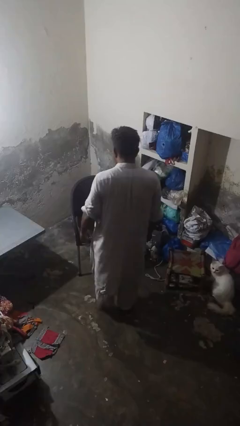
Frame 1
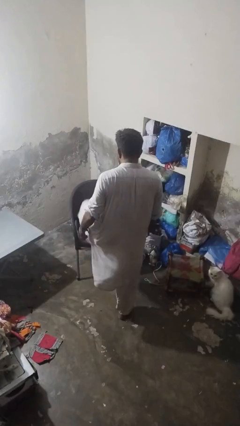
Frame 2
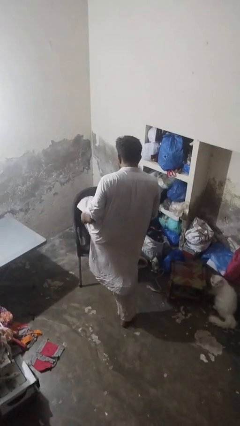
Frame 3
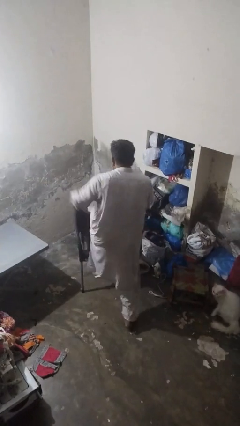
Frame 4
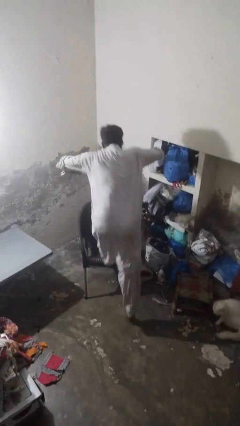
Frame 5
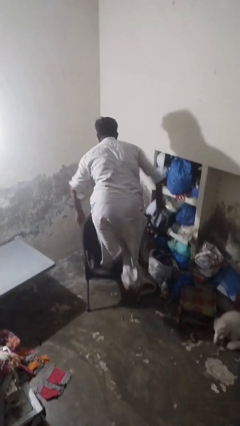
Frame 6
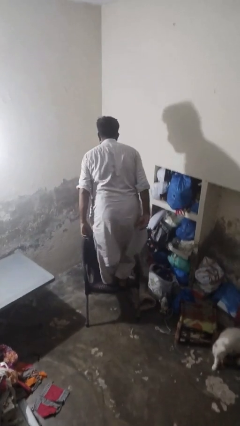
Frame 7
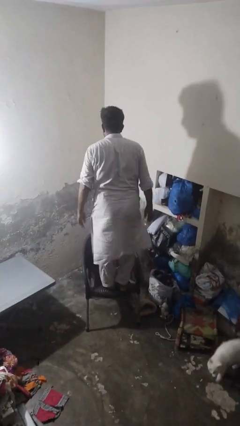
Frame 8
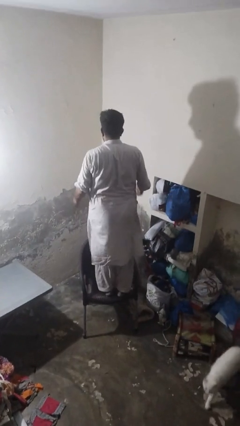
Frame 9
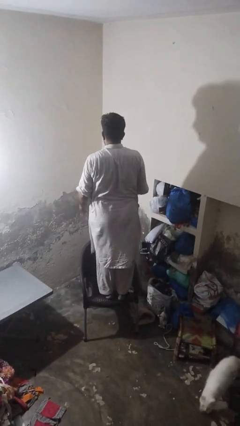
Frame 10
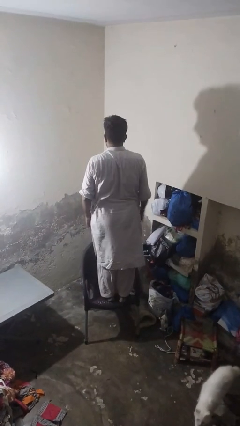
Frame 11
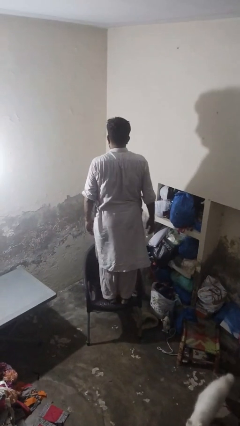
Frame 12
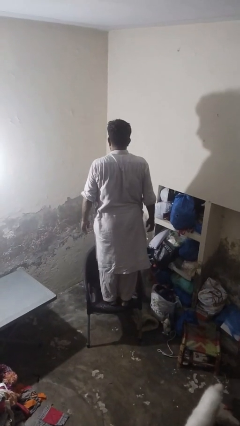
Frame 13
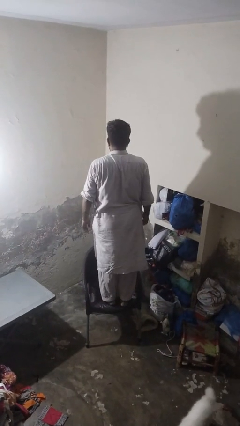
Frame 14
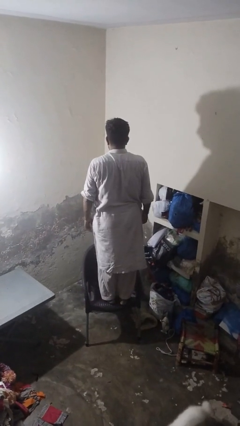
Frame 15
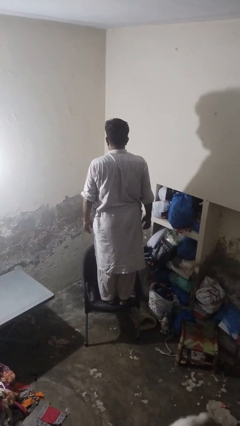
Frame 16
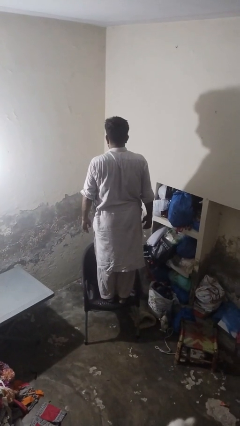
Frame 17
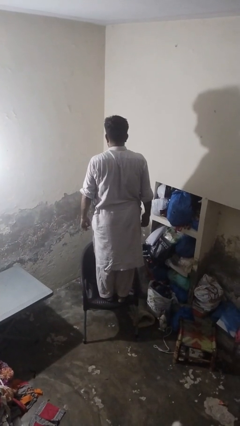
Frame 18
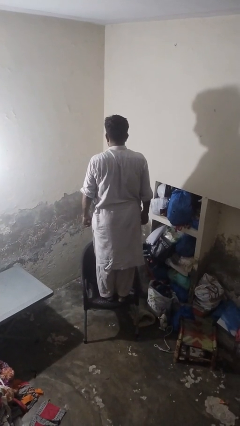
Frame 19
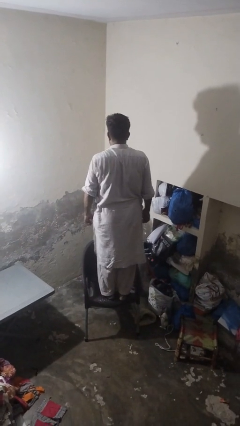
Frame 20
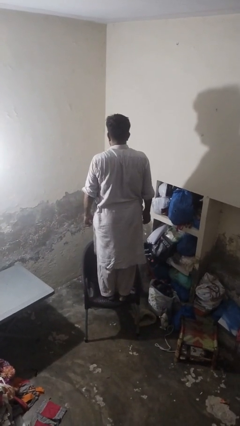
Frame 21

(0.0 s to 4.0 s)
person climbs on chair

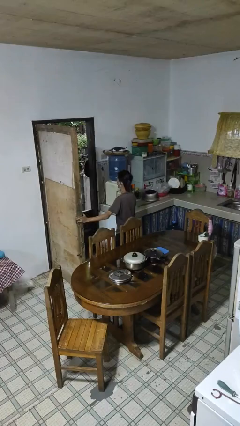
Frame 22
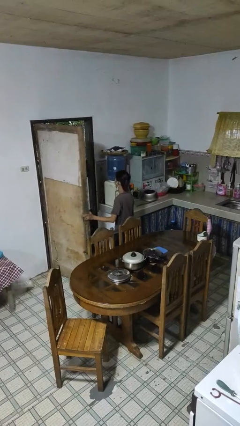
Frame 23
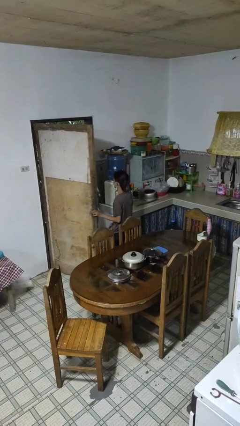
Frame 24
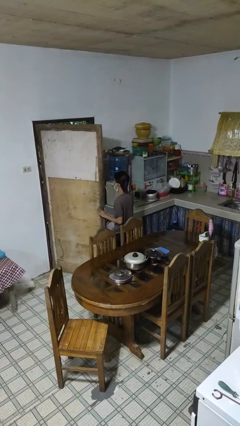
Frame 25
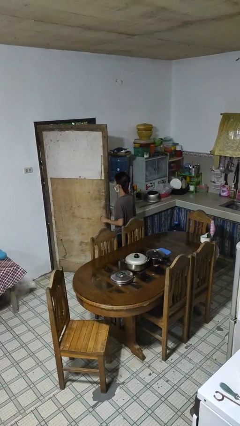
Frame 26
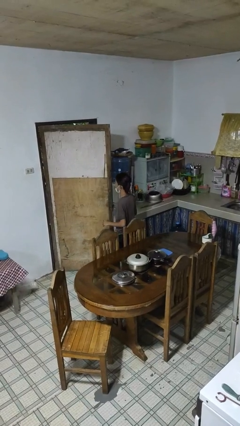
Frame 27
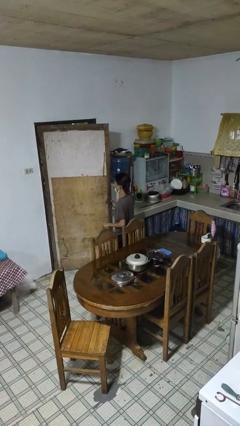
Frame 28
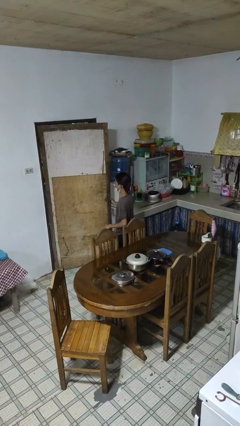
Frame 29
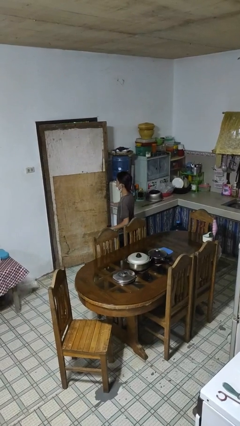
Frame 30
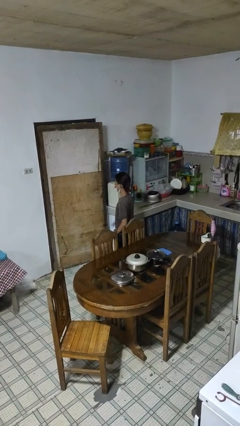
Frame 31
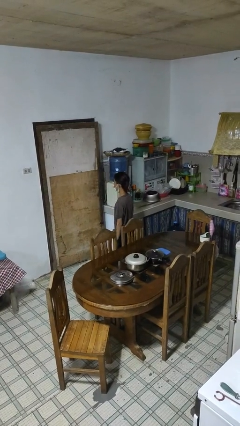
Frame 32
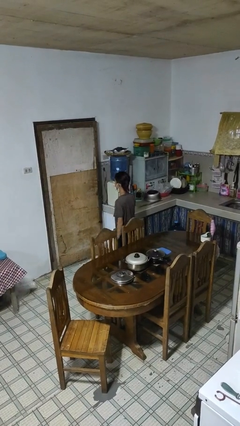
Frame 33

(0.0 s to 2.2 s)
person closes facility door

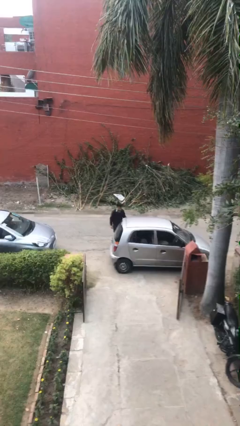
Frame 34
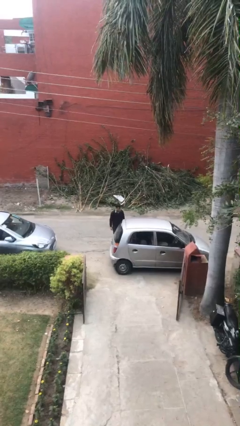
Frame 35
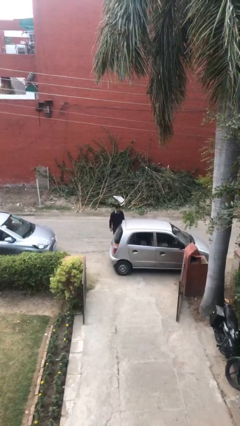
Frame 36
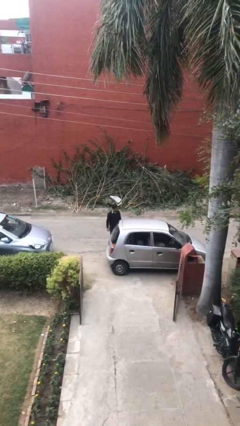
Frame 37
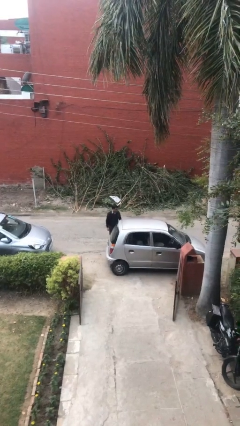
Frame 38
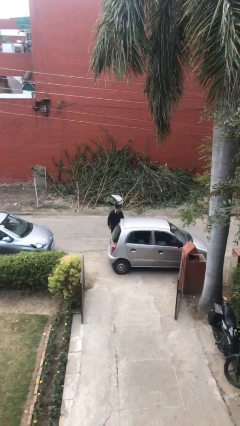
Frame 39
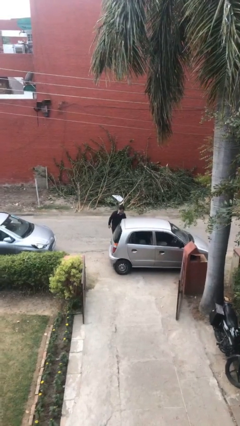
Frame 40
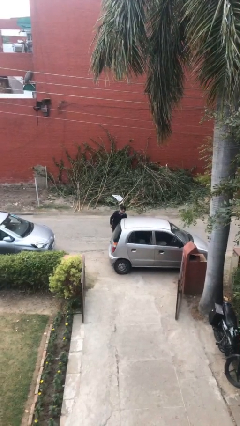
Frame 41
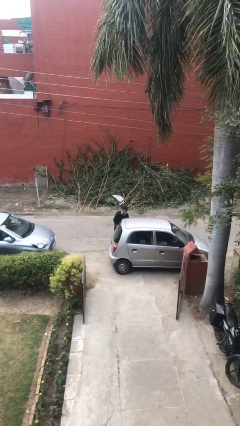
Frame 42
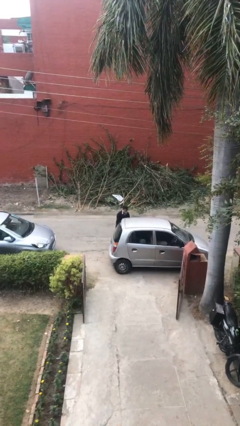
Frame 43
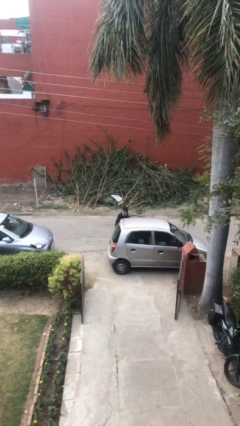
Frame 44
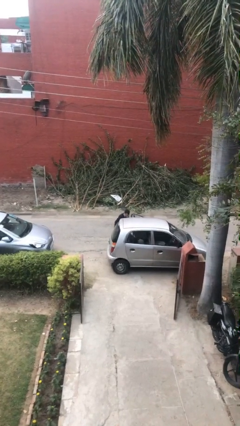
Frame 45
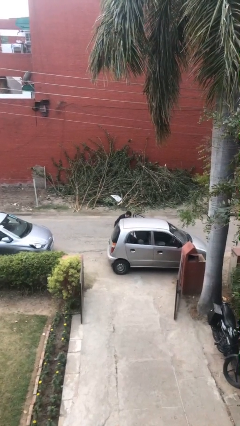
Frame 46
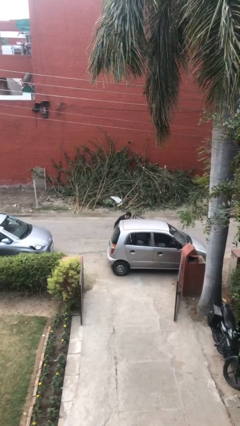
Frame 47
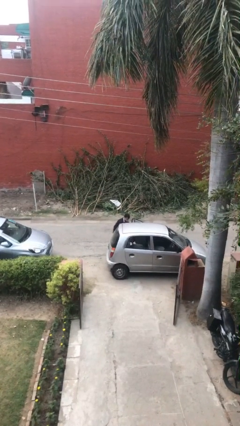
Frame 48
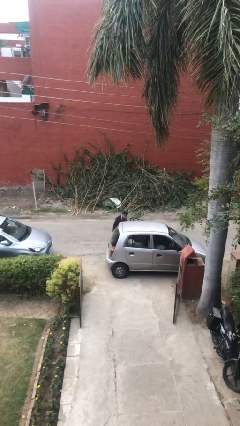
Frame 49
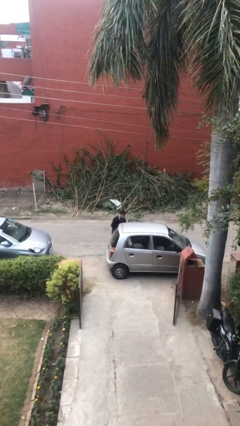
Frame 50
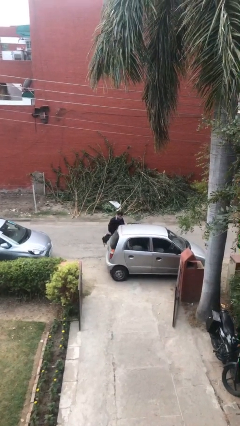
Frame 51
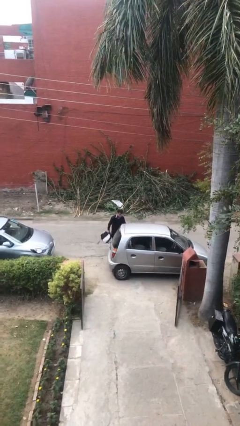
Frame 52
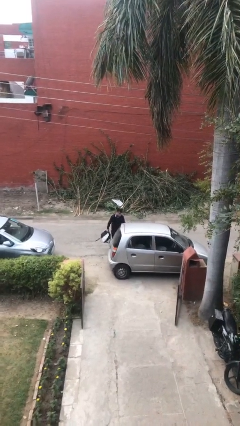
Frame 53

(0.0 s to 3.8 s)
person unloads car

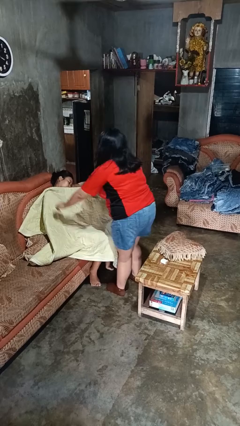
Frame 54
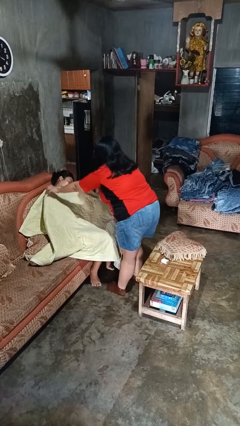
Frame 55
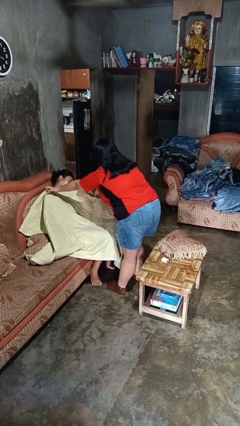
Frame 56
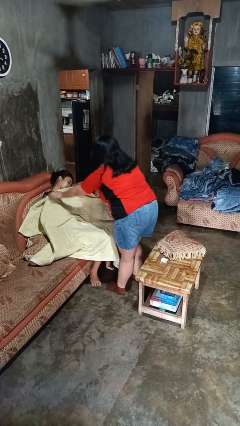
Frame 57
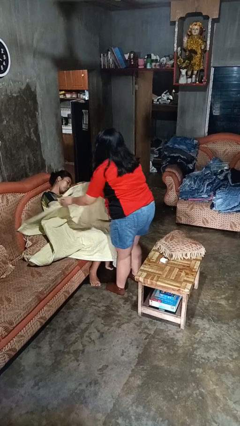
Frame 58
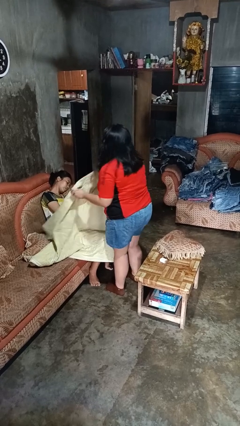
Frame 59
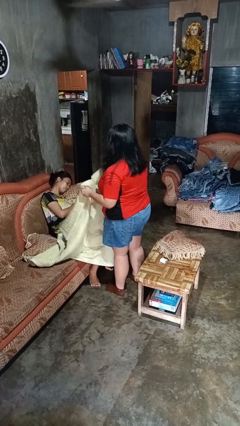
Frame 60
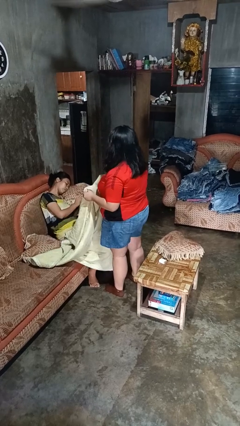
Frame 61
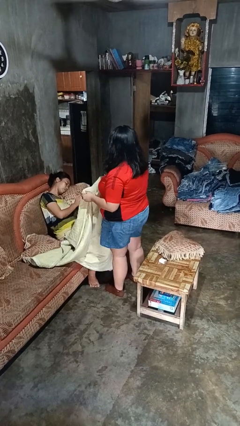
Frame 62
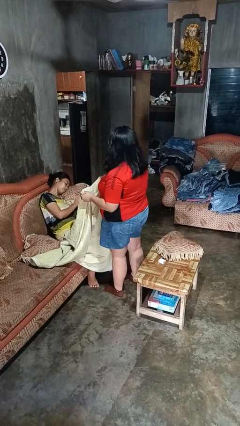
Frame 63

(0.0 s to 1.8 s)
person uncovers friend with blanket

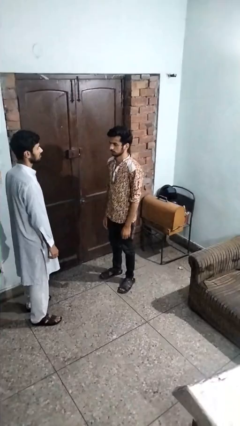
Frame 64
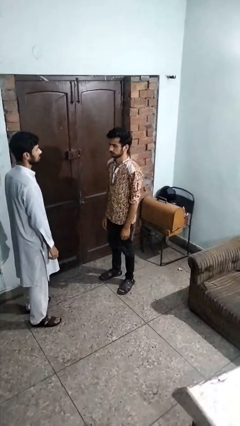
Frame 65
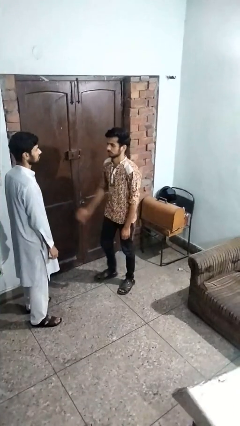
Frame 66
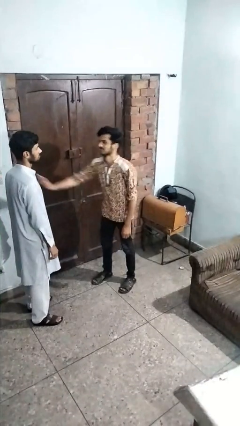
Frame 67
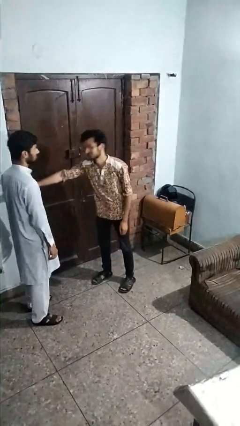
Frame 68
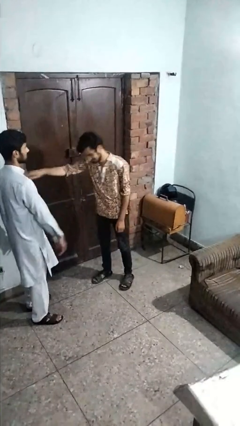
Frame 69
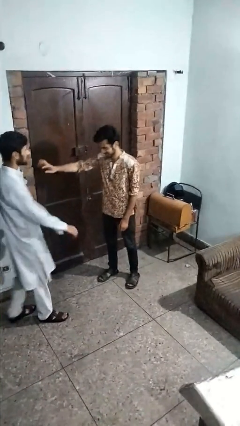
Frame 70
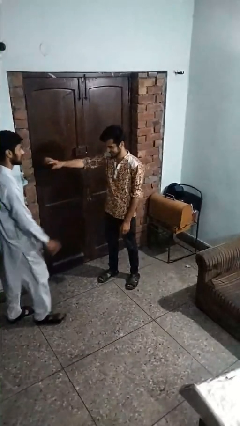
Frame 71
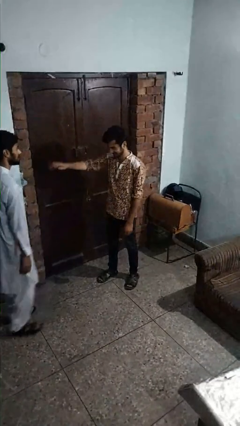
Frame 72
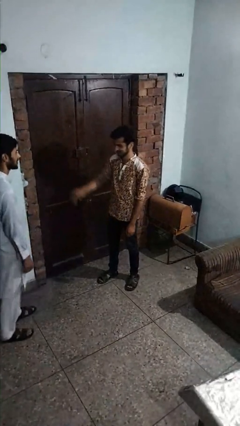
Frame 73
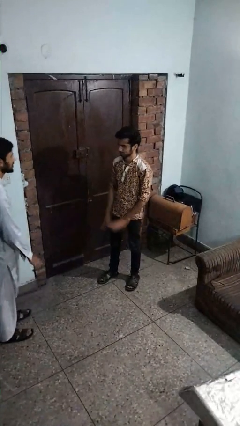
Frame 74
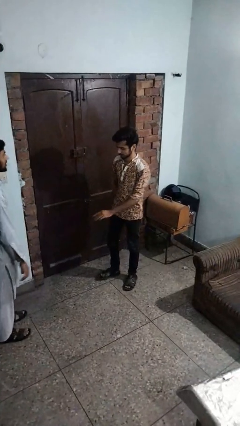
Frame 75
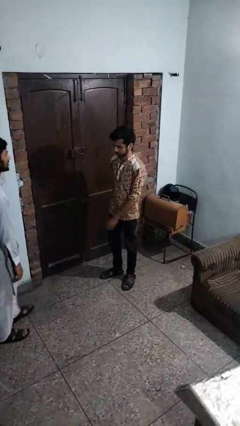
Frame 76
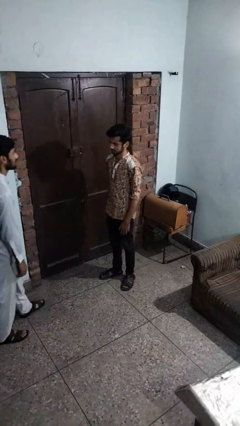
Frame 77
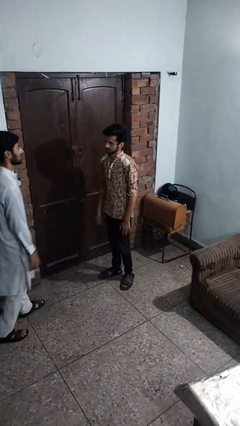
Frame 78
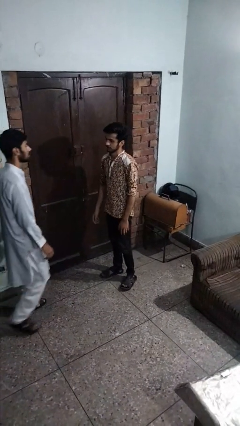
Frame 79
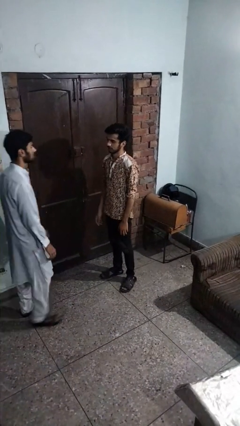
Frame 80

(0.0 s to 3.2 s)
person shoves person

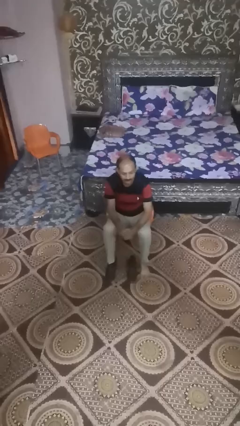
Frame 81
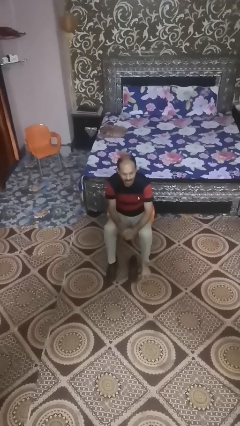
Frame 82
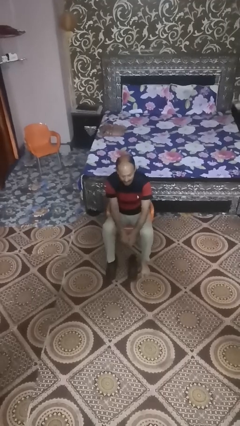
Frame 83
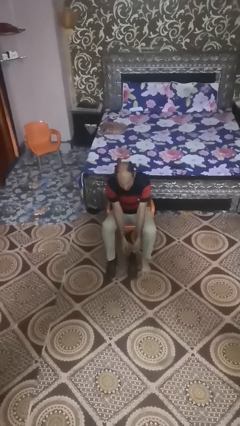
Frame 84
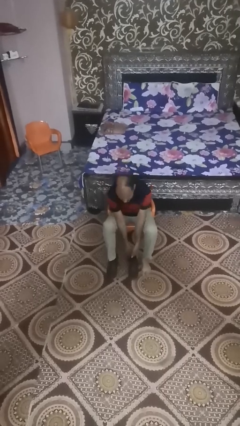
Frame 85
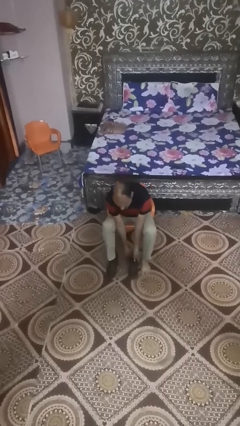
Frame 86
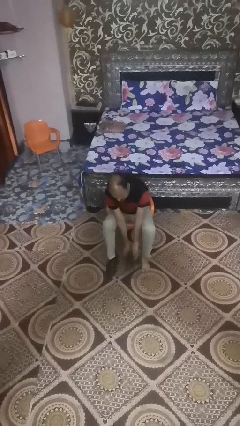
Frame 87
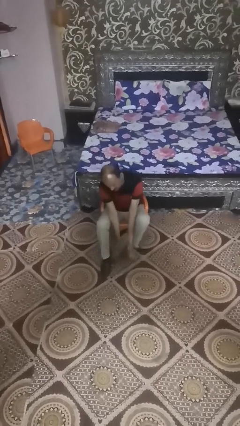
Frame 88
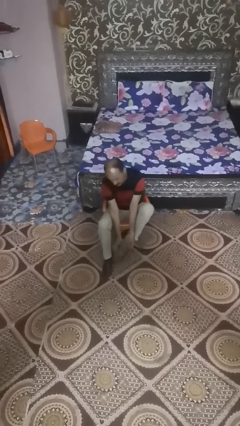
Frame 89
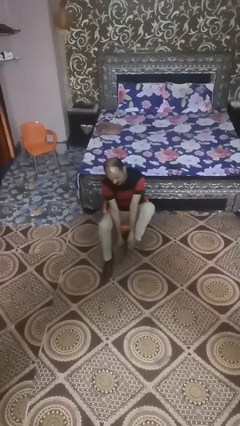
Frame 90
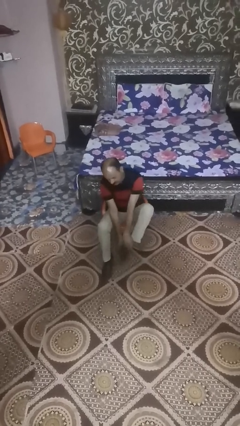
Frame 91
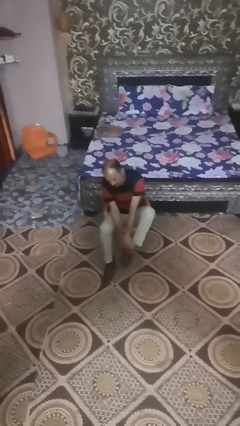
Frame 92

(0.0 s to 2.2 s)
person puts on boots
